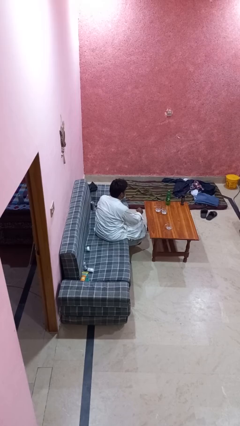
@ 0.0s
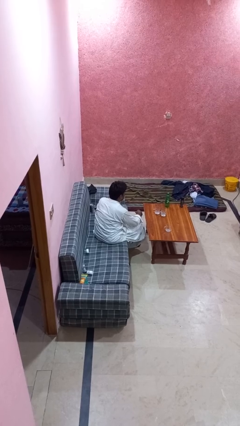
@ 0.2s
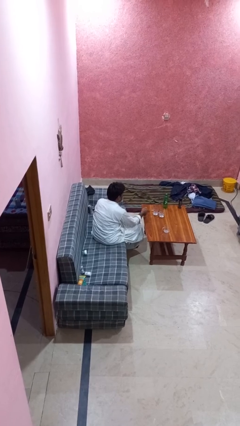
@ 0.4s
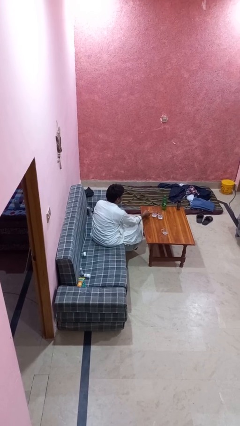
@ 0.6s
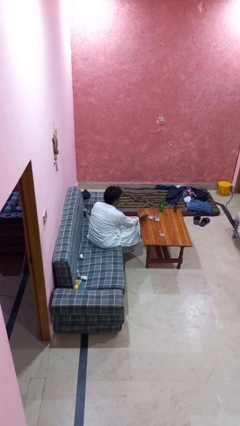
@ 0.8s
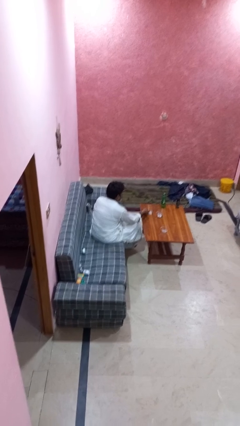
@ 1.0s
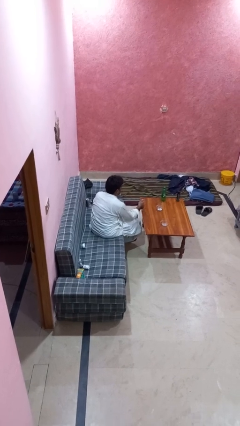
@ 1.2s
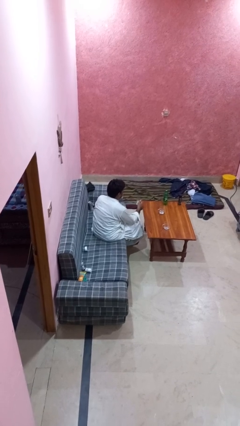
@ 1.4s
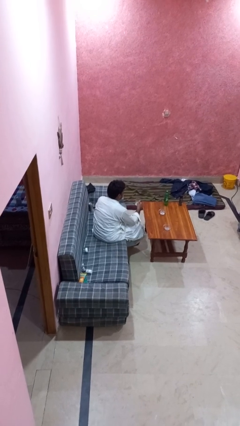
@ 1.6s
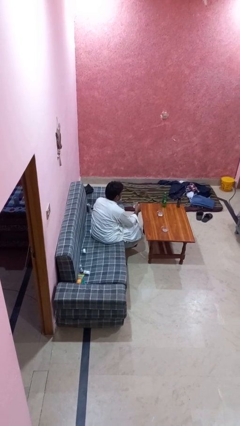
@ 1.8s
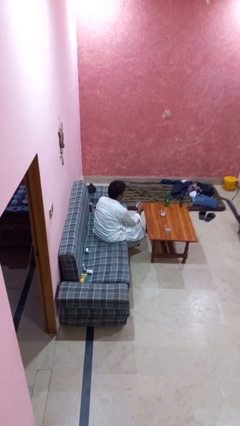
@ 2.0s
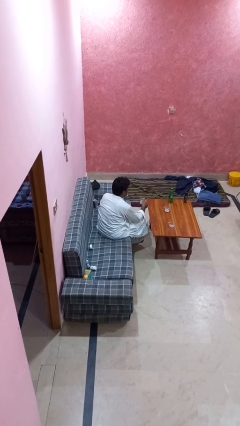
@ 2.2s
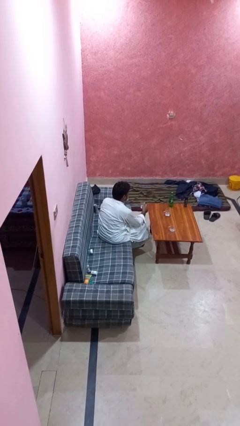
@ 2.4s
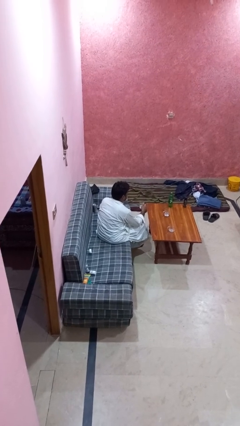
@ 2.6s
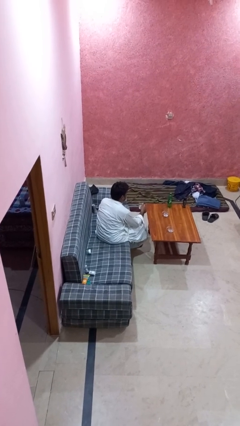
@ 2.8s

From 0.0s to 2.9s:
person picks up object from table

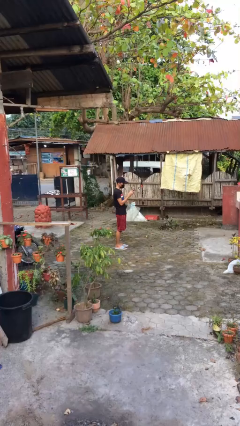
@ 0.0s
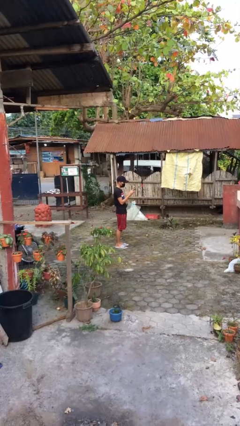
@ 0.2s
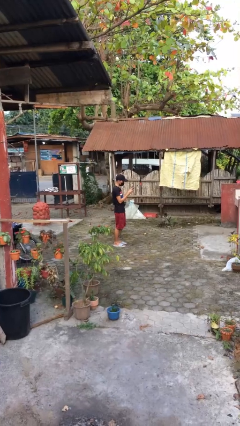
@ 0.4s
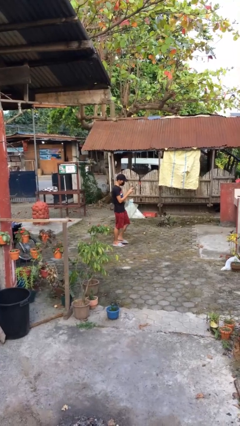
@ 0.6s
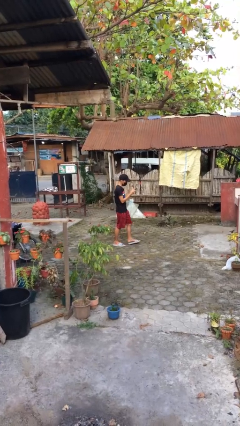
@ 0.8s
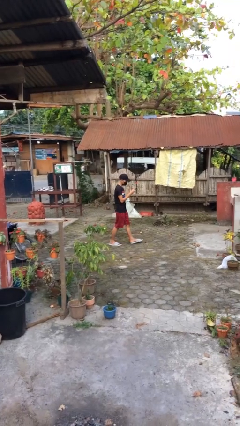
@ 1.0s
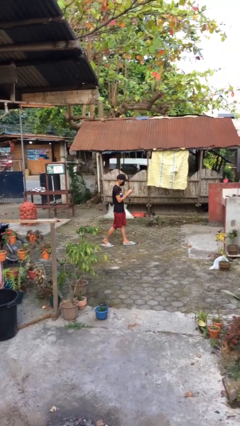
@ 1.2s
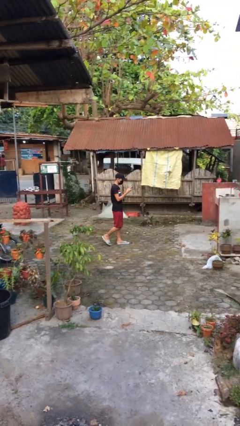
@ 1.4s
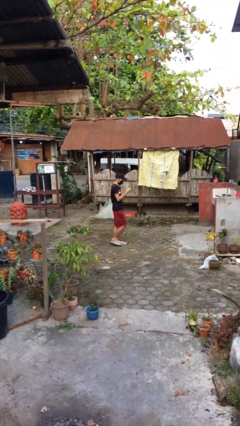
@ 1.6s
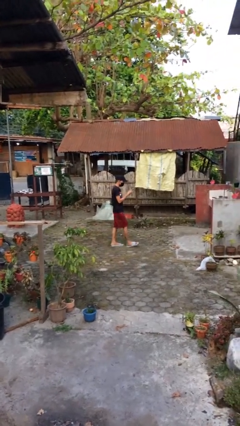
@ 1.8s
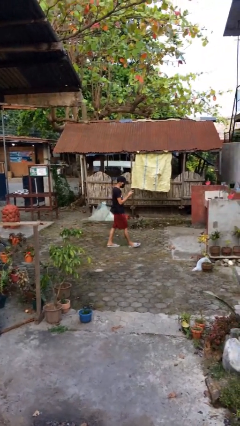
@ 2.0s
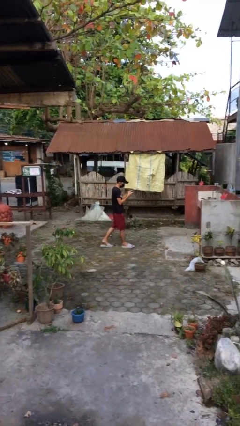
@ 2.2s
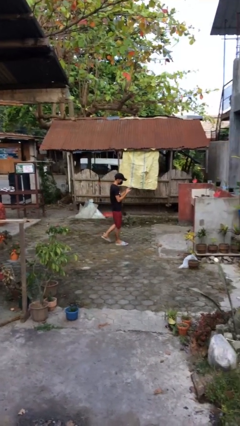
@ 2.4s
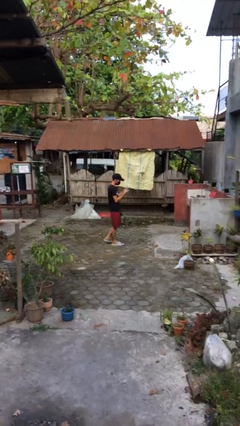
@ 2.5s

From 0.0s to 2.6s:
person texts on phone

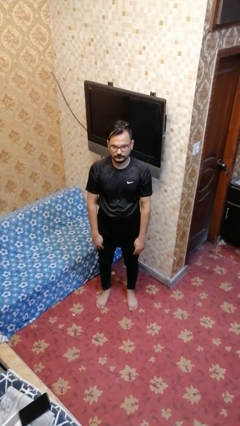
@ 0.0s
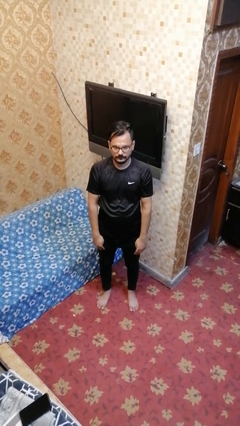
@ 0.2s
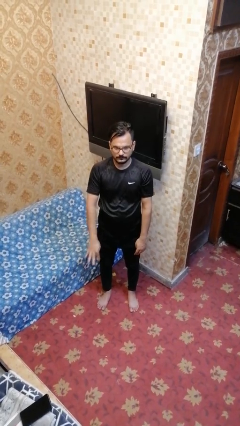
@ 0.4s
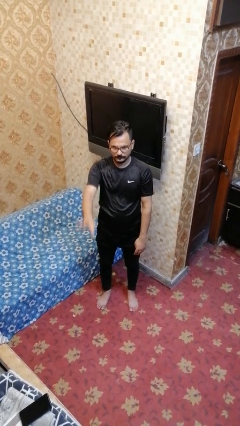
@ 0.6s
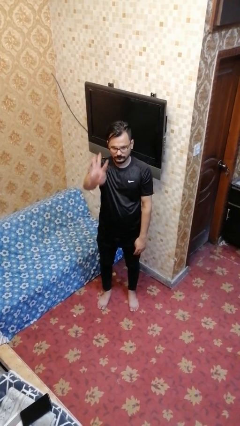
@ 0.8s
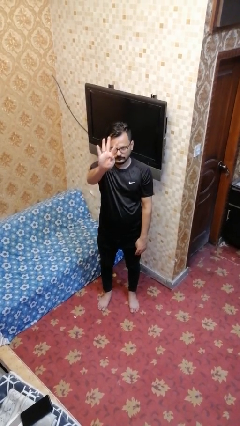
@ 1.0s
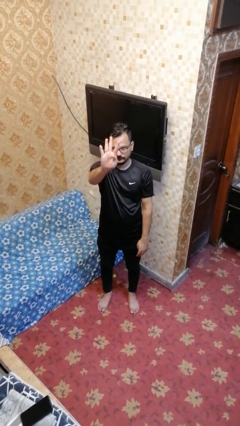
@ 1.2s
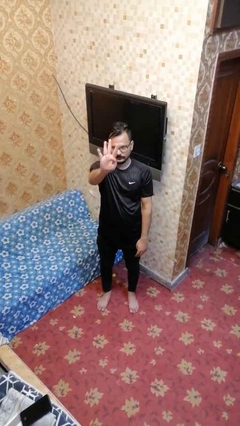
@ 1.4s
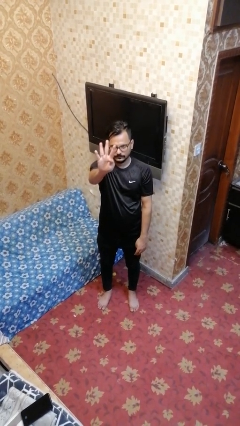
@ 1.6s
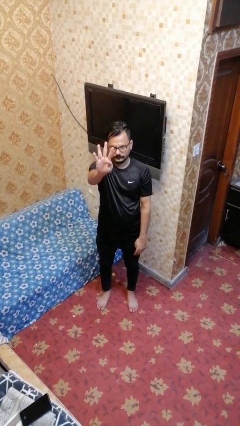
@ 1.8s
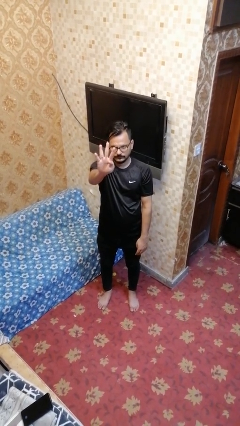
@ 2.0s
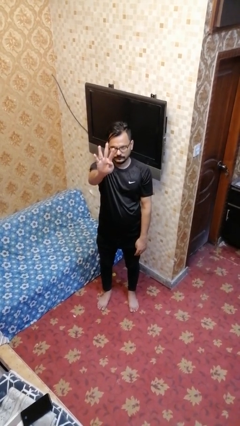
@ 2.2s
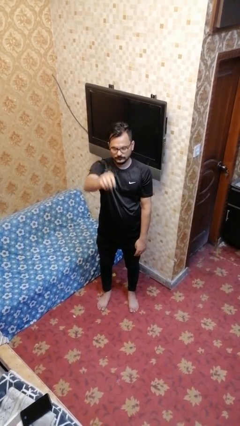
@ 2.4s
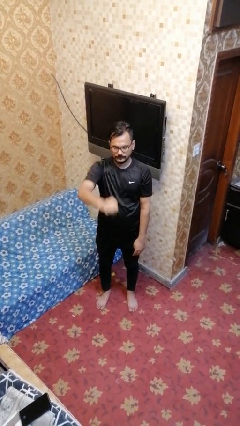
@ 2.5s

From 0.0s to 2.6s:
person gestures number four

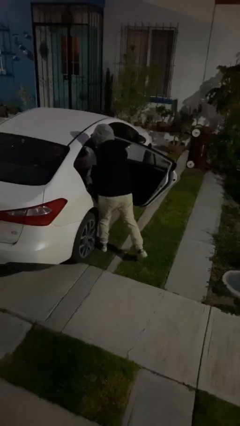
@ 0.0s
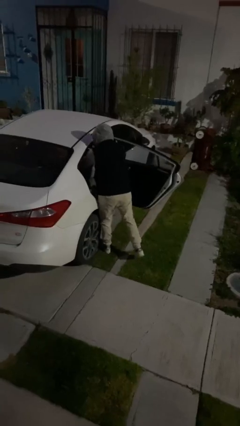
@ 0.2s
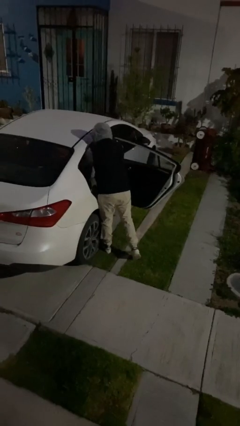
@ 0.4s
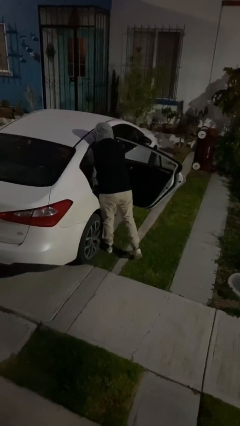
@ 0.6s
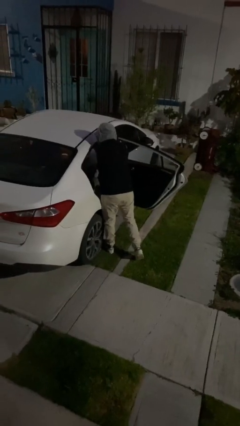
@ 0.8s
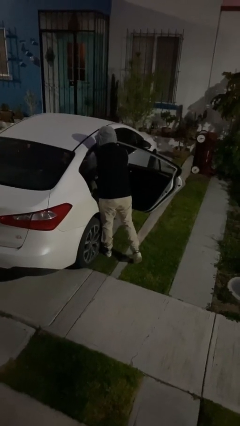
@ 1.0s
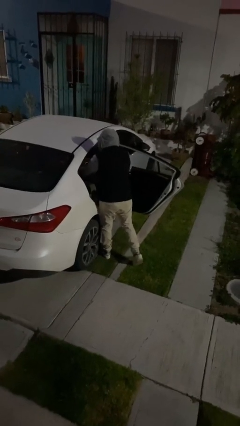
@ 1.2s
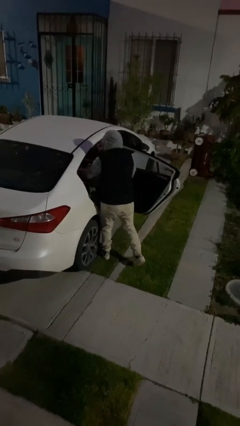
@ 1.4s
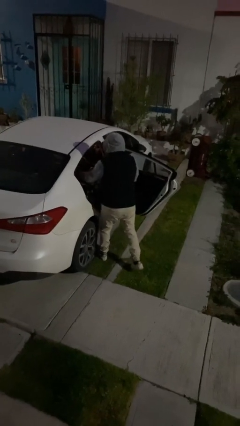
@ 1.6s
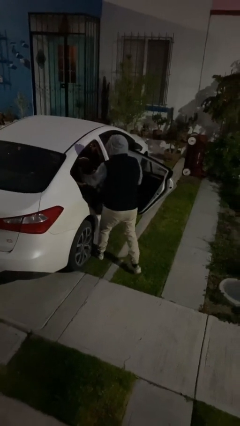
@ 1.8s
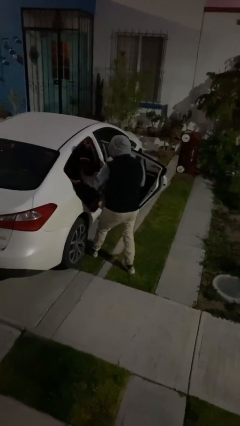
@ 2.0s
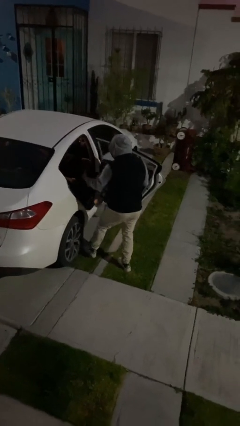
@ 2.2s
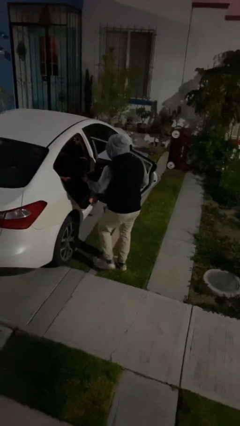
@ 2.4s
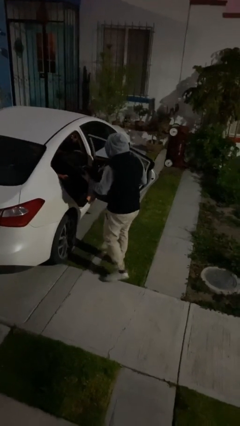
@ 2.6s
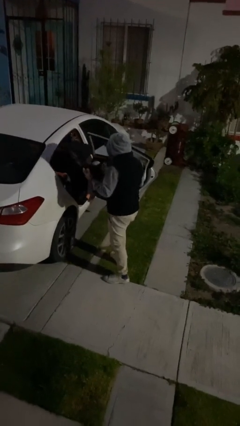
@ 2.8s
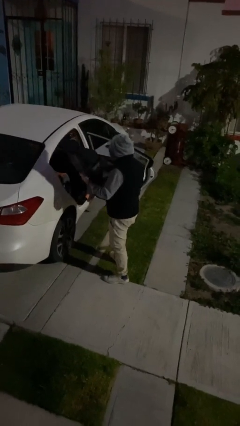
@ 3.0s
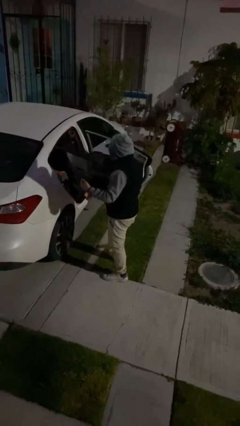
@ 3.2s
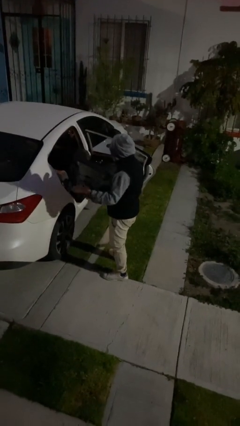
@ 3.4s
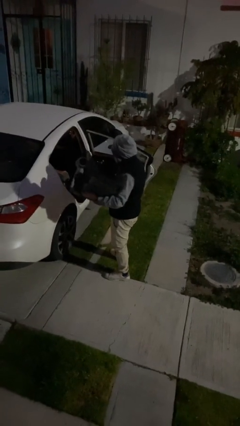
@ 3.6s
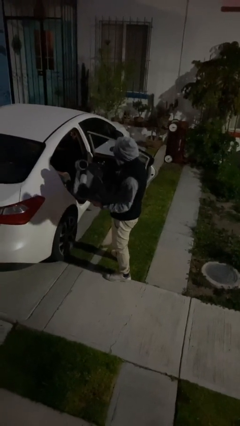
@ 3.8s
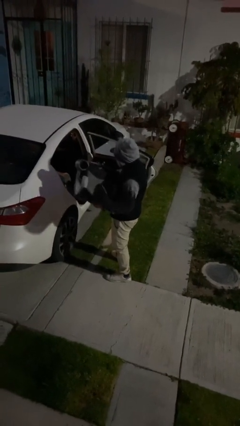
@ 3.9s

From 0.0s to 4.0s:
person unloads car

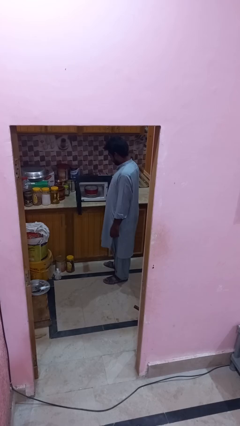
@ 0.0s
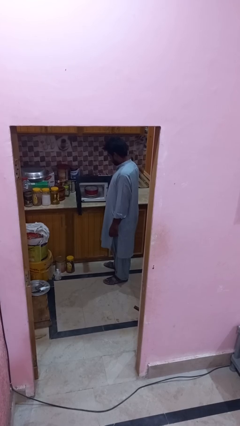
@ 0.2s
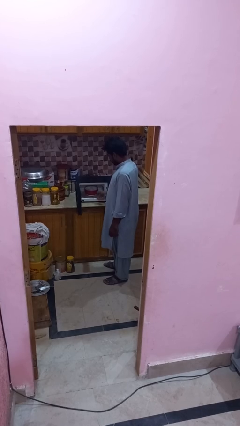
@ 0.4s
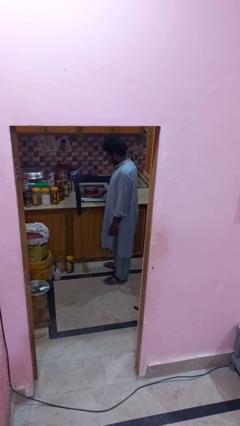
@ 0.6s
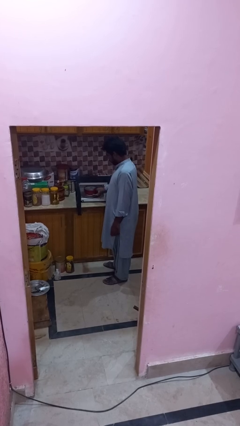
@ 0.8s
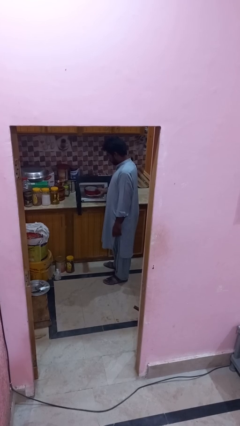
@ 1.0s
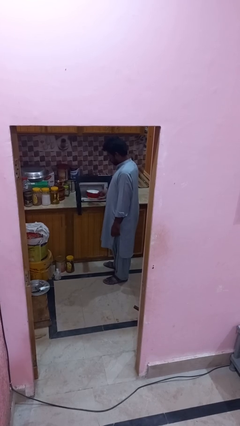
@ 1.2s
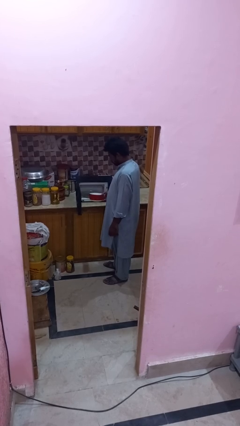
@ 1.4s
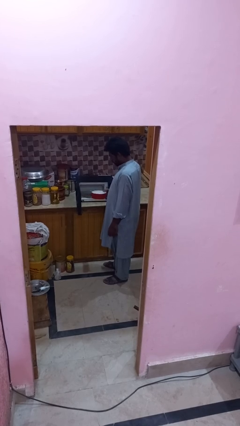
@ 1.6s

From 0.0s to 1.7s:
person takes object from microwave

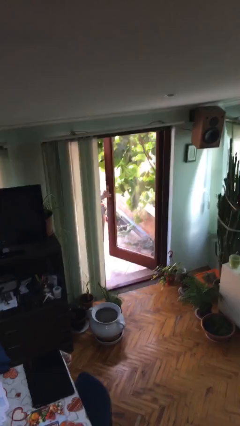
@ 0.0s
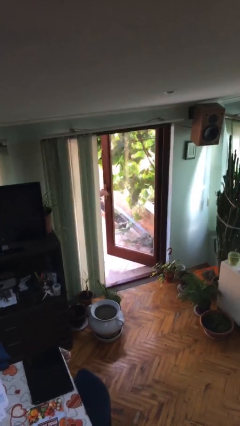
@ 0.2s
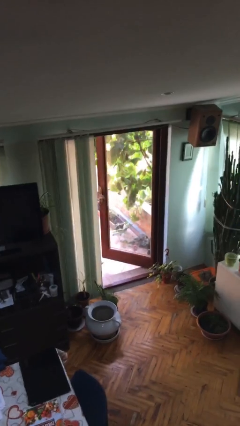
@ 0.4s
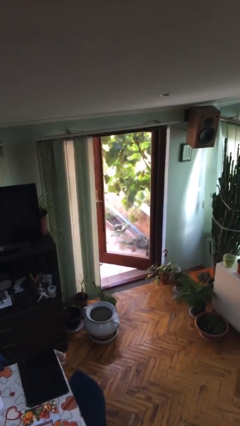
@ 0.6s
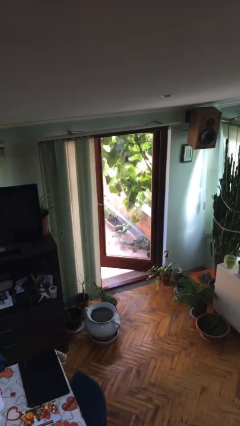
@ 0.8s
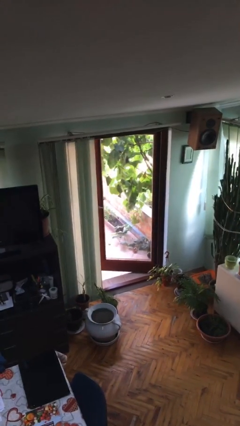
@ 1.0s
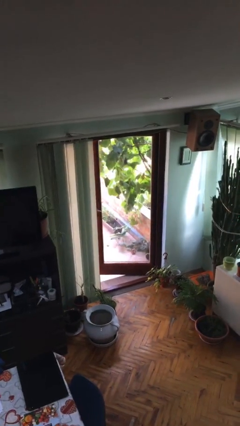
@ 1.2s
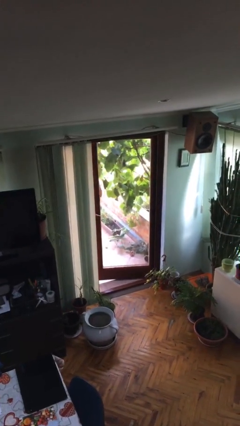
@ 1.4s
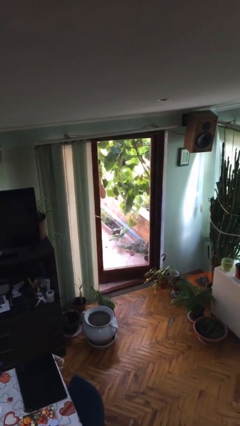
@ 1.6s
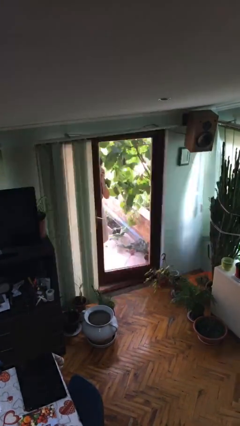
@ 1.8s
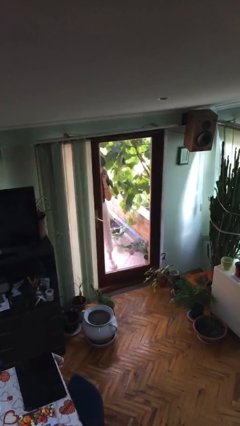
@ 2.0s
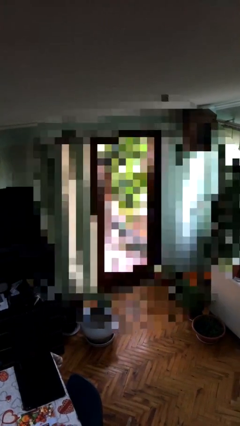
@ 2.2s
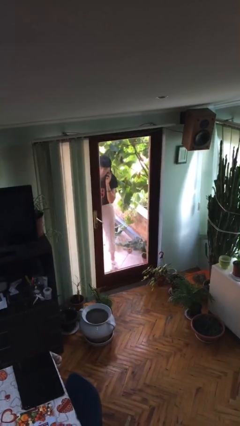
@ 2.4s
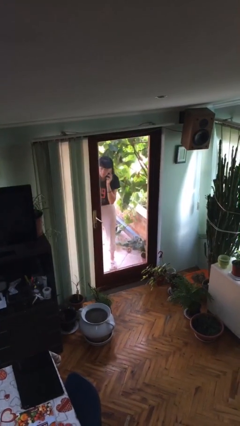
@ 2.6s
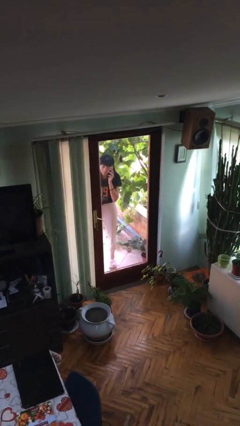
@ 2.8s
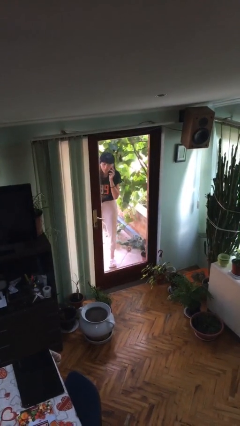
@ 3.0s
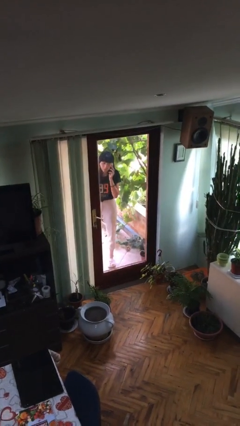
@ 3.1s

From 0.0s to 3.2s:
person closes facility door

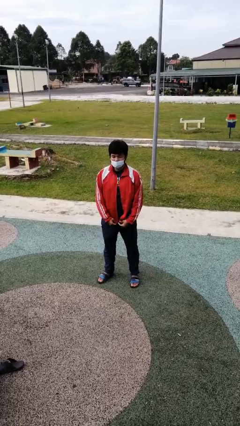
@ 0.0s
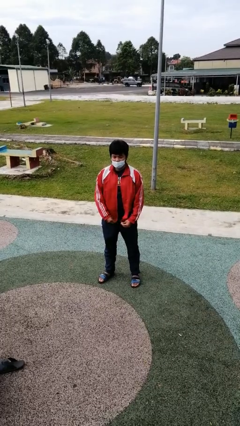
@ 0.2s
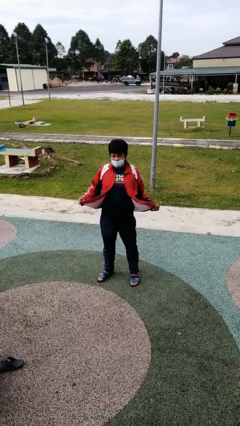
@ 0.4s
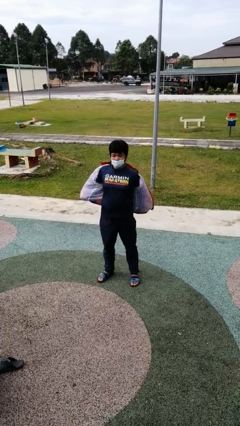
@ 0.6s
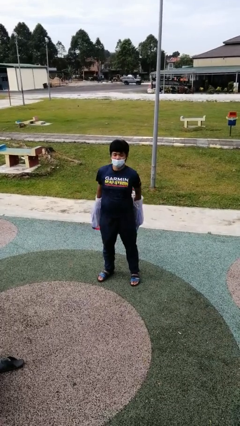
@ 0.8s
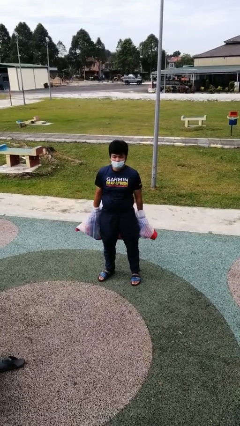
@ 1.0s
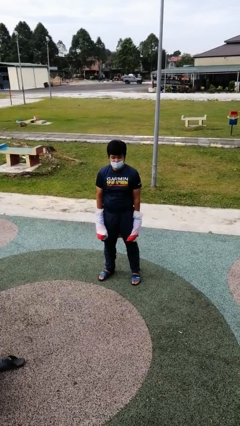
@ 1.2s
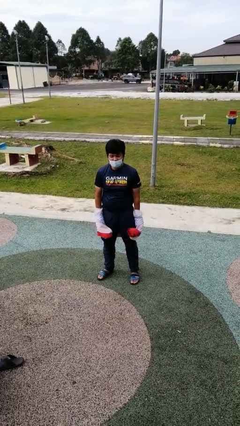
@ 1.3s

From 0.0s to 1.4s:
person takes off jacket
